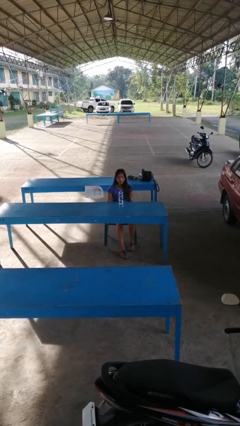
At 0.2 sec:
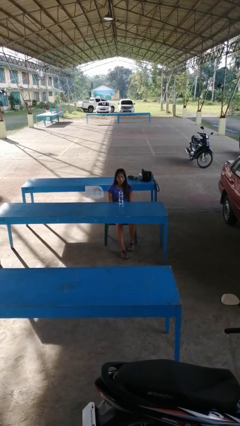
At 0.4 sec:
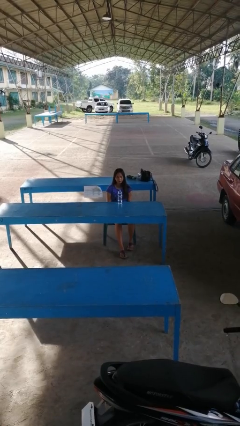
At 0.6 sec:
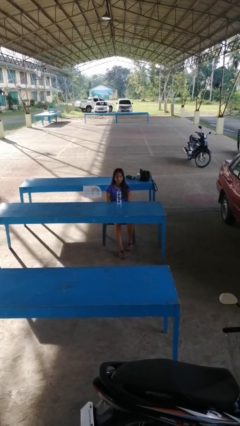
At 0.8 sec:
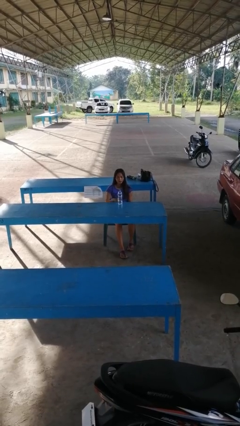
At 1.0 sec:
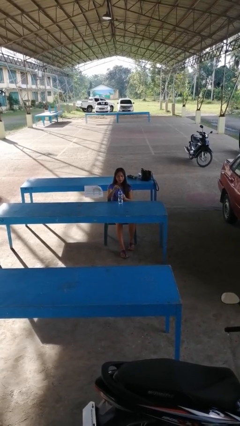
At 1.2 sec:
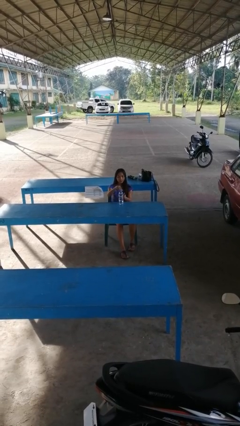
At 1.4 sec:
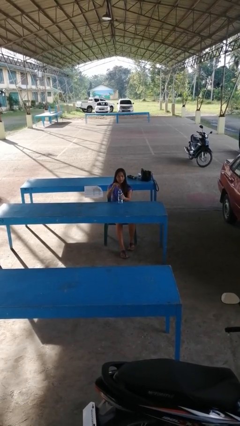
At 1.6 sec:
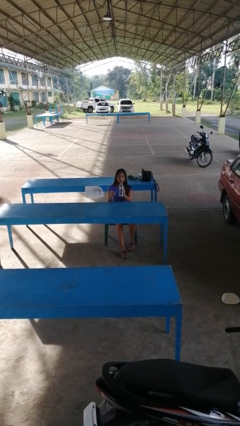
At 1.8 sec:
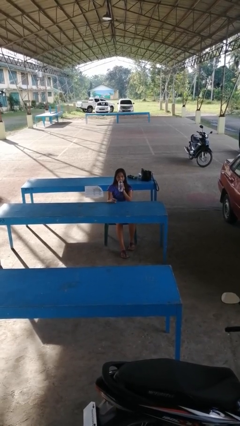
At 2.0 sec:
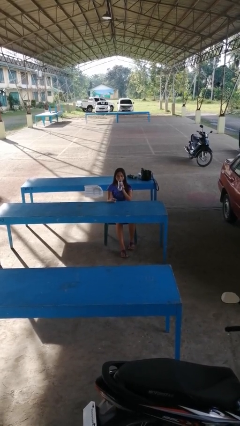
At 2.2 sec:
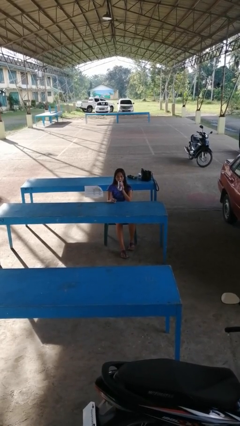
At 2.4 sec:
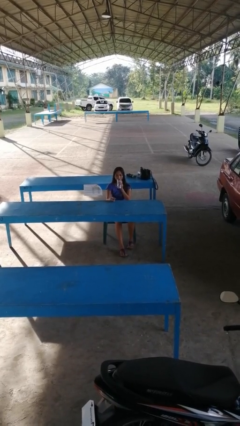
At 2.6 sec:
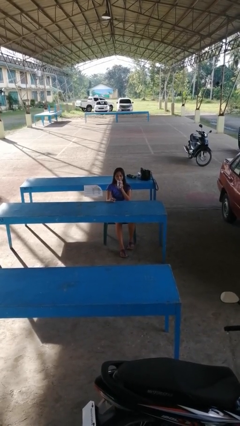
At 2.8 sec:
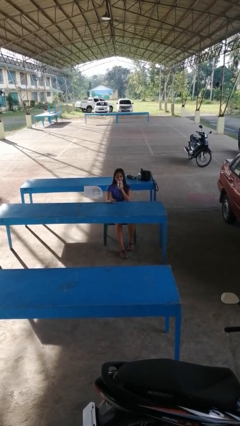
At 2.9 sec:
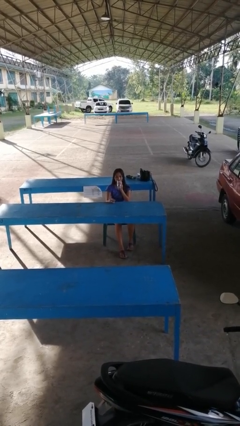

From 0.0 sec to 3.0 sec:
person drinks from bottle

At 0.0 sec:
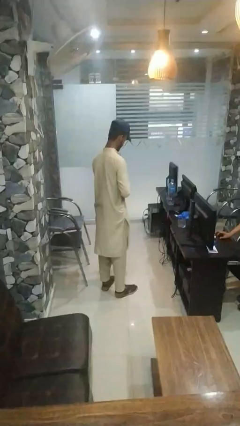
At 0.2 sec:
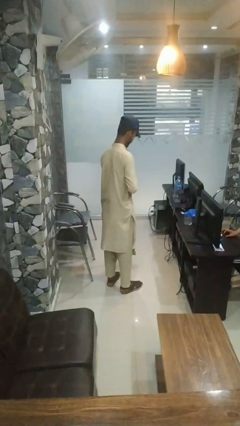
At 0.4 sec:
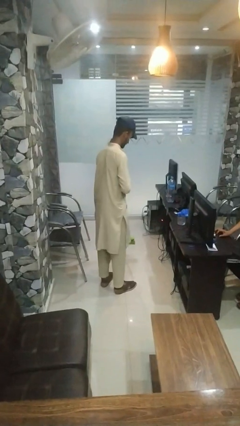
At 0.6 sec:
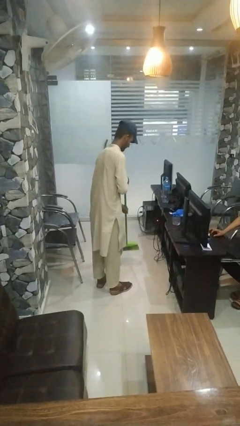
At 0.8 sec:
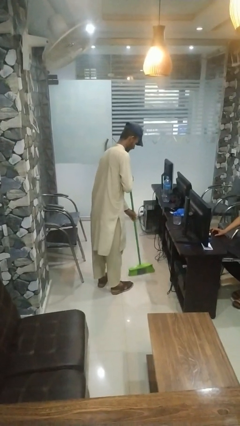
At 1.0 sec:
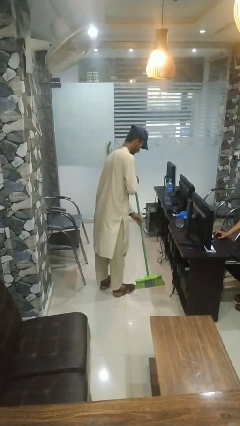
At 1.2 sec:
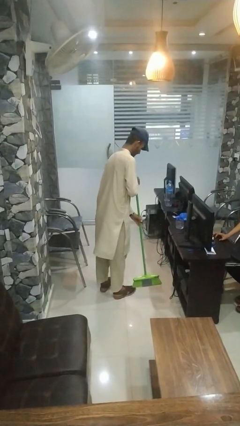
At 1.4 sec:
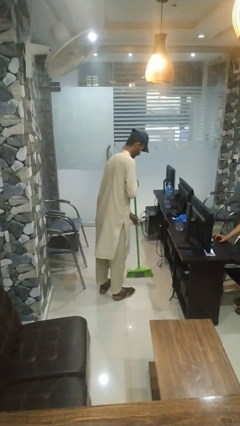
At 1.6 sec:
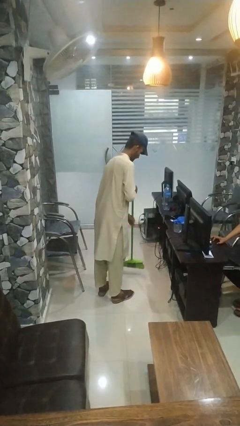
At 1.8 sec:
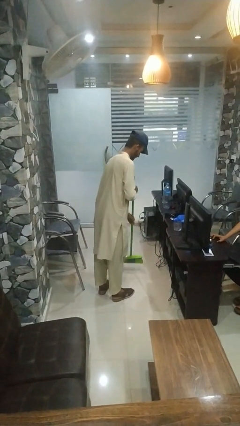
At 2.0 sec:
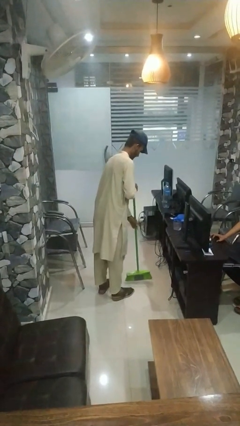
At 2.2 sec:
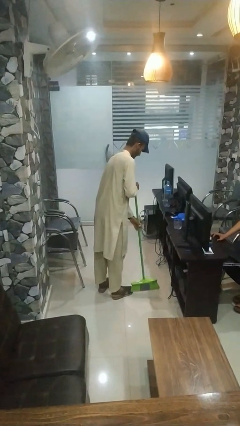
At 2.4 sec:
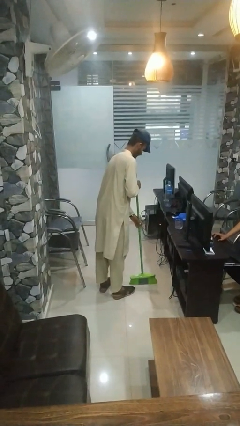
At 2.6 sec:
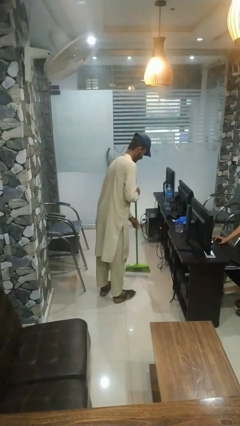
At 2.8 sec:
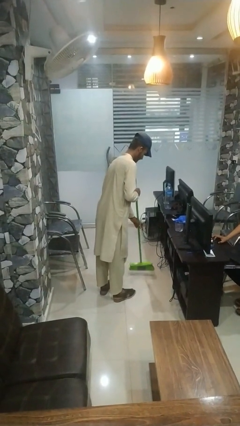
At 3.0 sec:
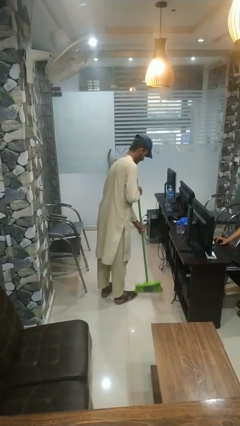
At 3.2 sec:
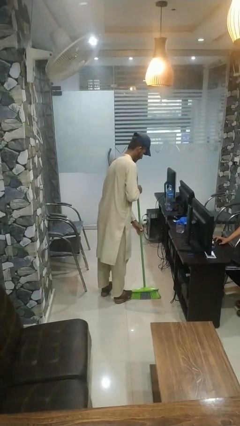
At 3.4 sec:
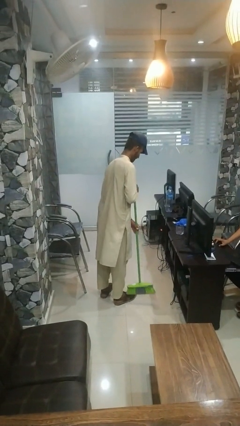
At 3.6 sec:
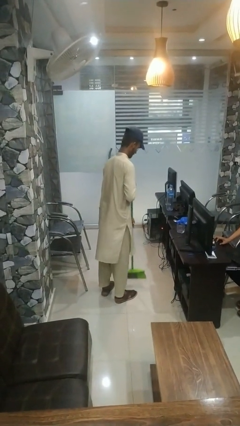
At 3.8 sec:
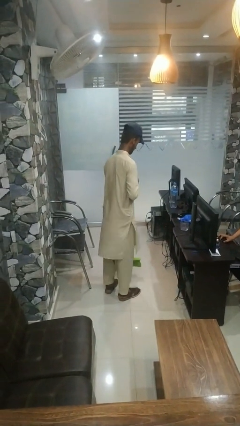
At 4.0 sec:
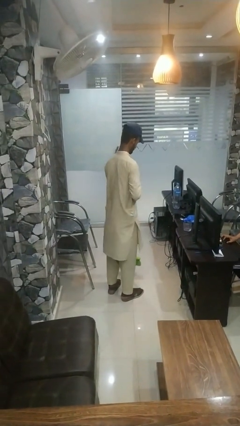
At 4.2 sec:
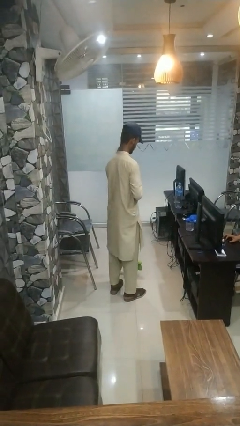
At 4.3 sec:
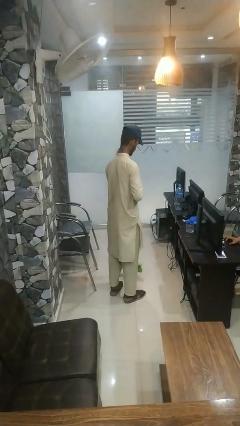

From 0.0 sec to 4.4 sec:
person sweeps floor

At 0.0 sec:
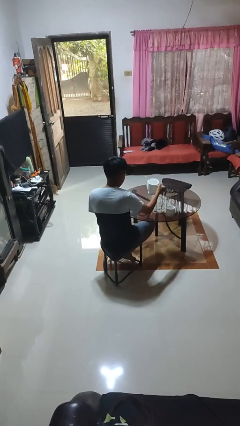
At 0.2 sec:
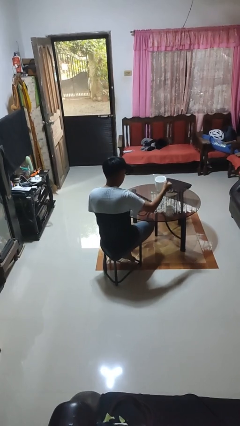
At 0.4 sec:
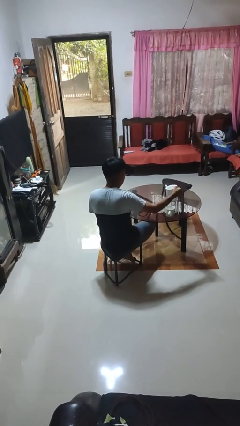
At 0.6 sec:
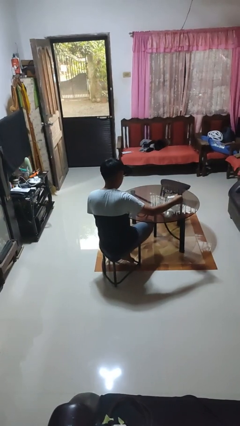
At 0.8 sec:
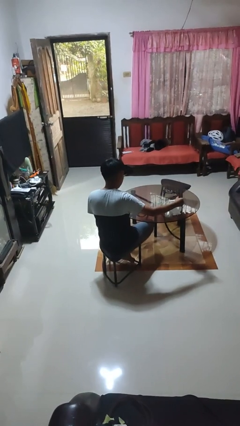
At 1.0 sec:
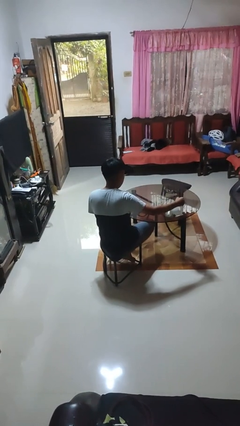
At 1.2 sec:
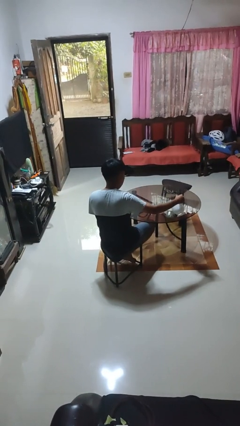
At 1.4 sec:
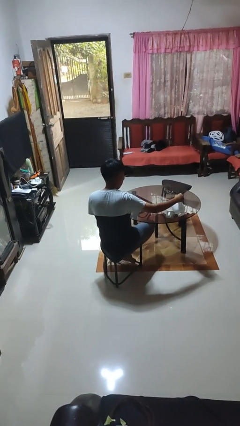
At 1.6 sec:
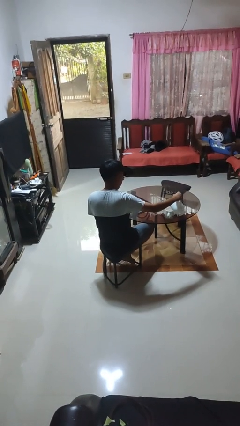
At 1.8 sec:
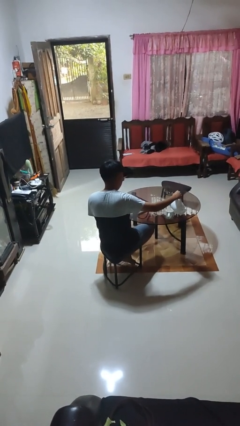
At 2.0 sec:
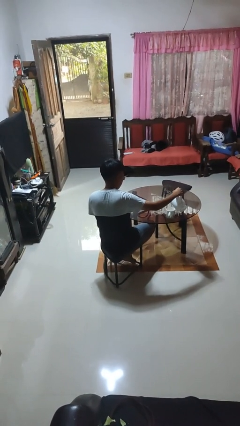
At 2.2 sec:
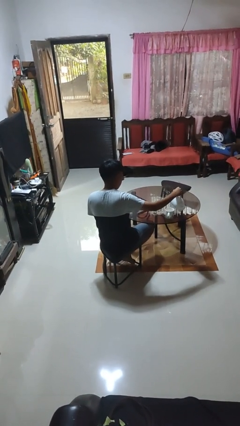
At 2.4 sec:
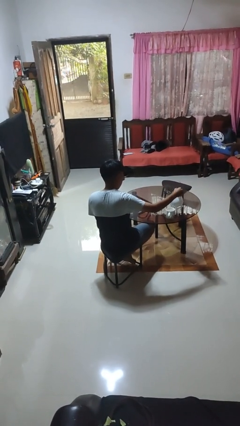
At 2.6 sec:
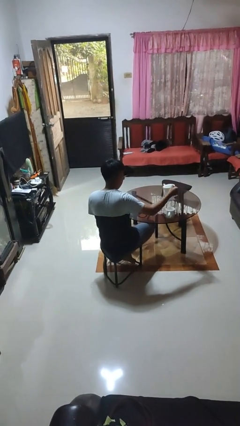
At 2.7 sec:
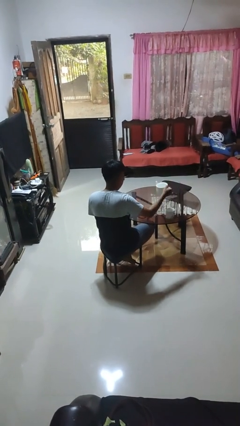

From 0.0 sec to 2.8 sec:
person pours coffee into mug

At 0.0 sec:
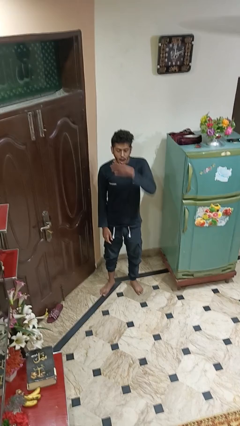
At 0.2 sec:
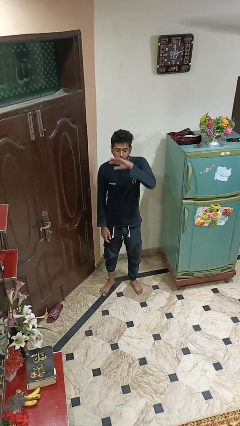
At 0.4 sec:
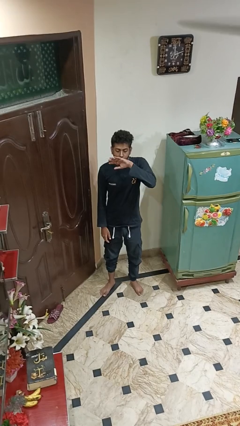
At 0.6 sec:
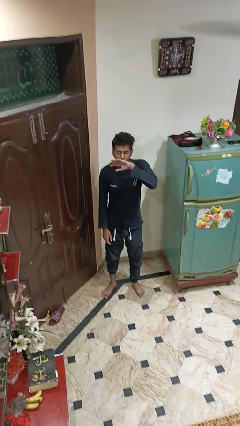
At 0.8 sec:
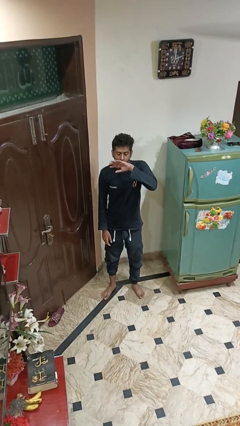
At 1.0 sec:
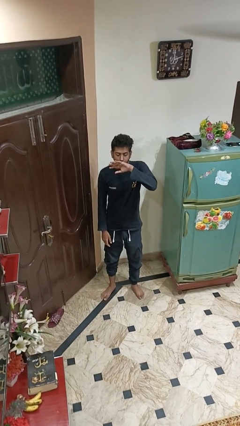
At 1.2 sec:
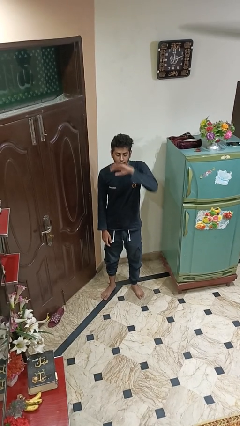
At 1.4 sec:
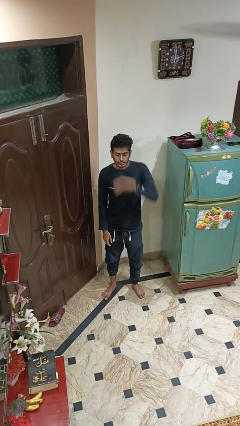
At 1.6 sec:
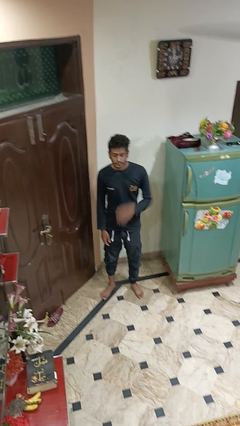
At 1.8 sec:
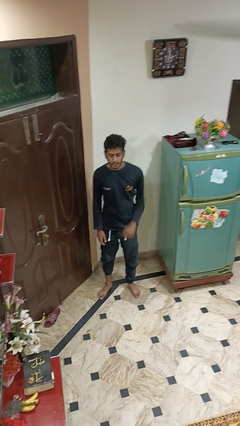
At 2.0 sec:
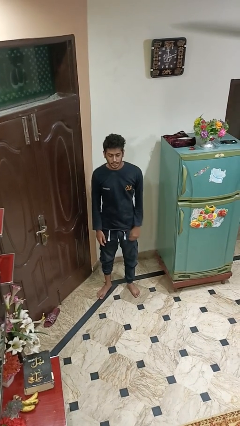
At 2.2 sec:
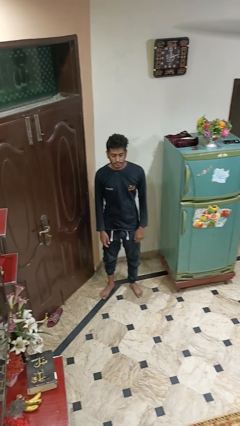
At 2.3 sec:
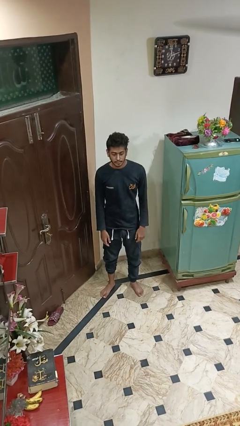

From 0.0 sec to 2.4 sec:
person yawns

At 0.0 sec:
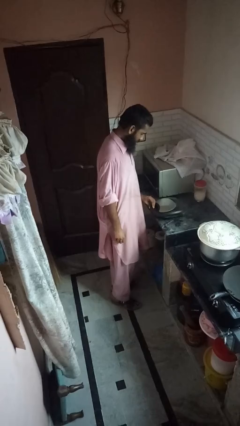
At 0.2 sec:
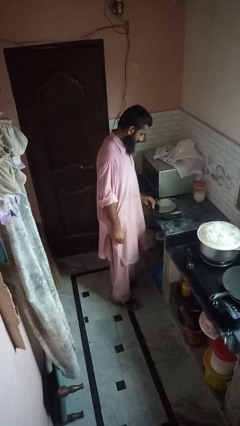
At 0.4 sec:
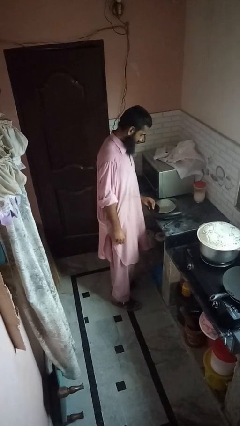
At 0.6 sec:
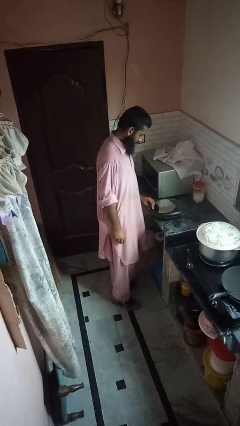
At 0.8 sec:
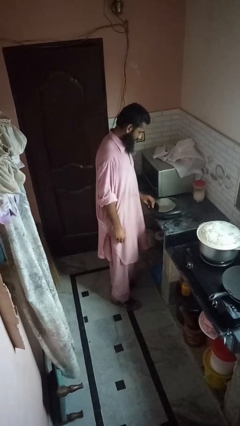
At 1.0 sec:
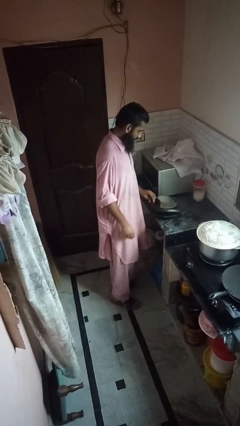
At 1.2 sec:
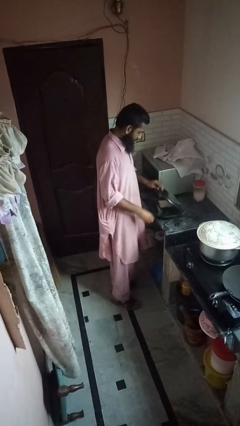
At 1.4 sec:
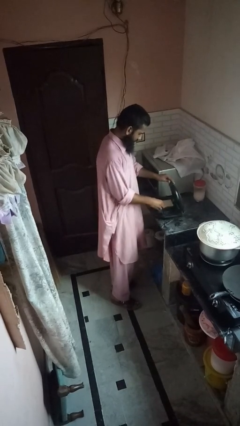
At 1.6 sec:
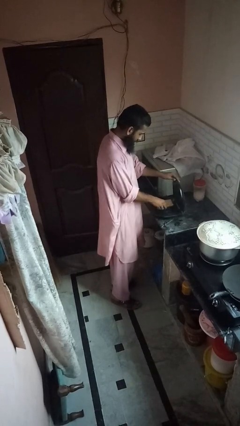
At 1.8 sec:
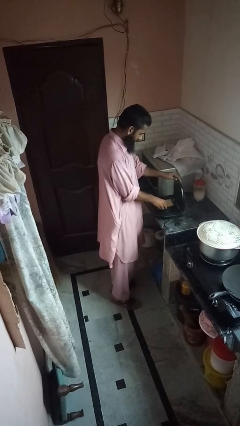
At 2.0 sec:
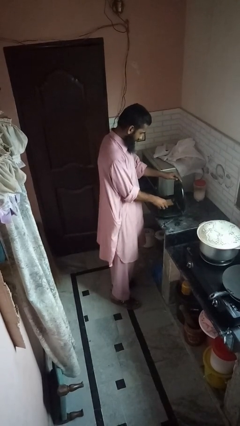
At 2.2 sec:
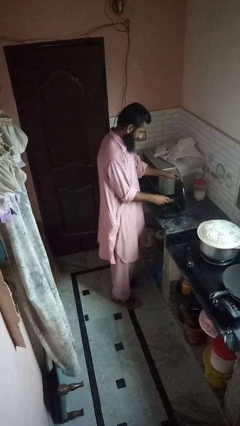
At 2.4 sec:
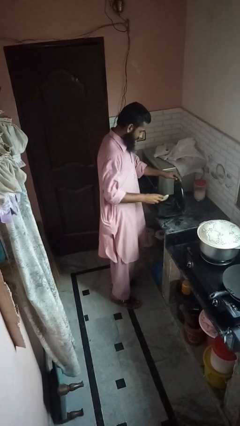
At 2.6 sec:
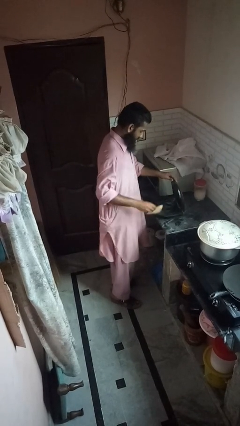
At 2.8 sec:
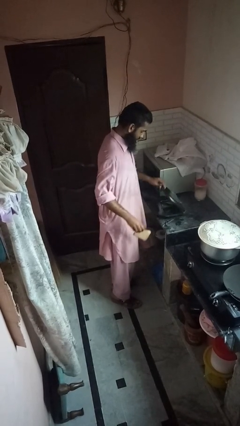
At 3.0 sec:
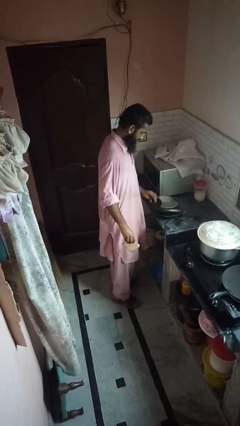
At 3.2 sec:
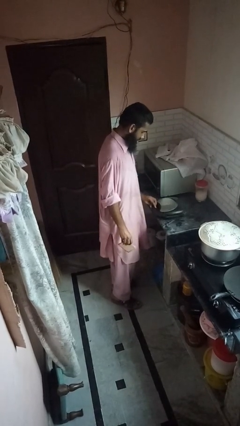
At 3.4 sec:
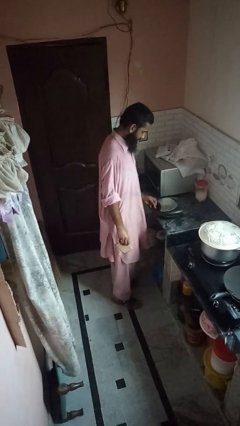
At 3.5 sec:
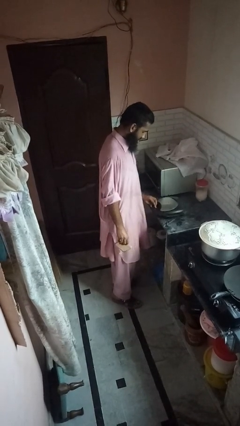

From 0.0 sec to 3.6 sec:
person takes object from toaster

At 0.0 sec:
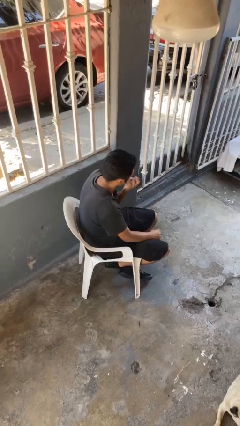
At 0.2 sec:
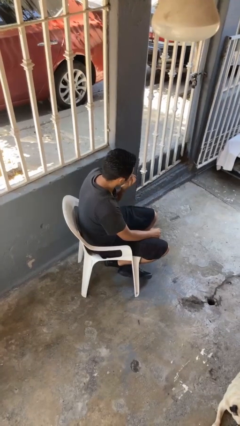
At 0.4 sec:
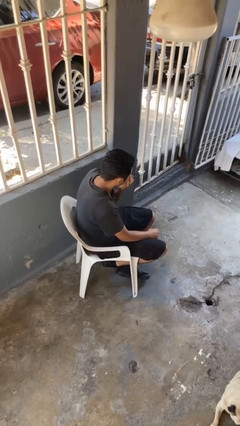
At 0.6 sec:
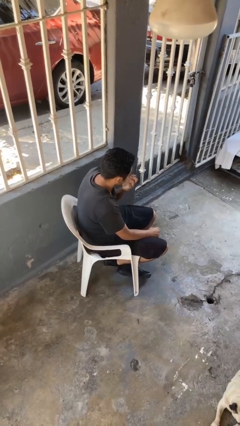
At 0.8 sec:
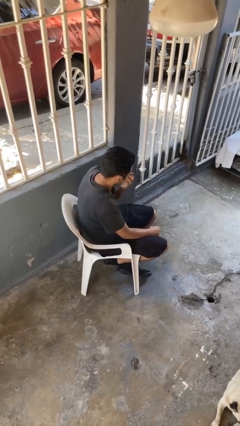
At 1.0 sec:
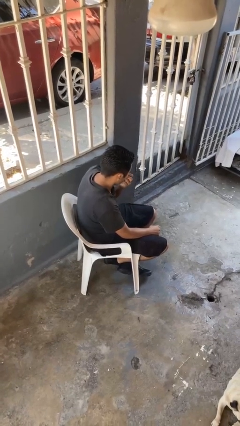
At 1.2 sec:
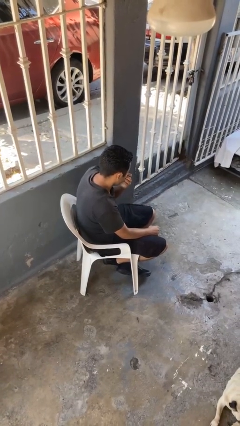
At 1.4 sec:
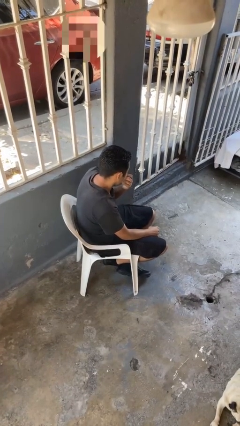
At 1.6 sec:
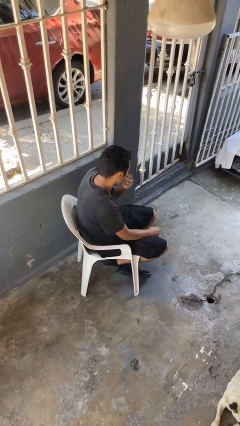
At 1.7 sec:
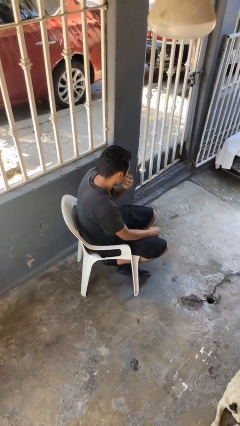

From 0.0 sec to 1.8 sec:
person licks fingers
